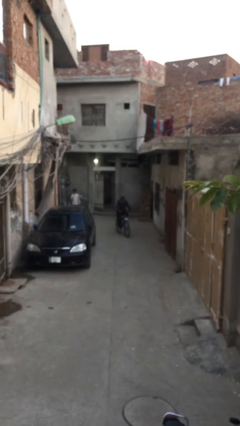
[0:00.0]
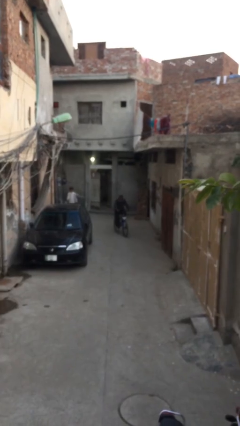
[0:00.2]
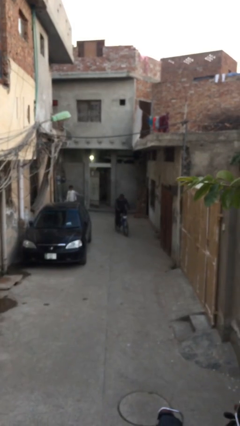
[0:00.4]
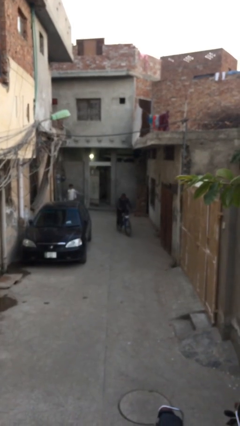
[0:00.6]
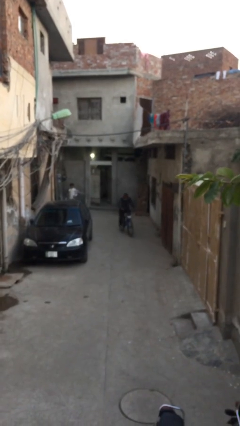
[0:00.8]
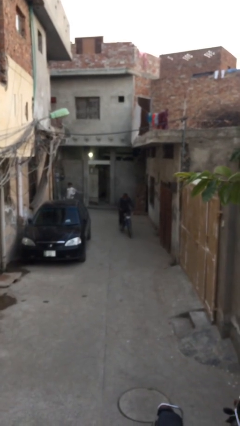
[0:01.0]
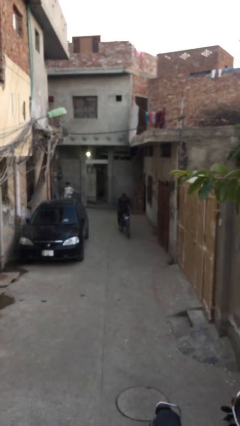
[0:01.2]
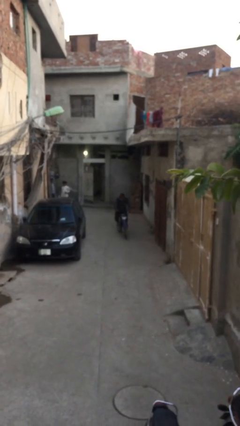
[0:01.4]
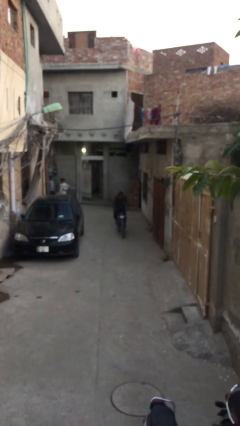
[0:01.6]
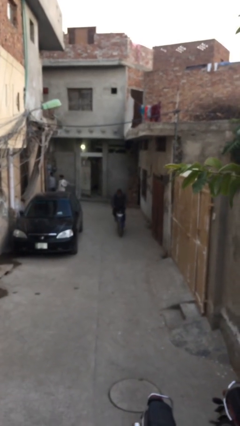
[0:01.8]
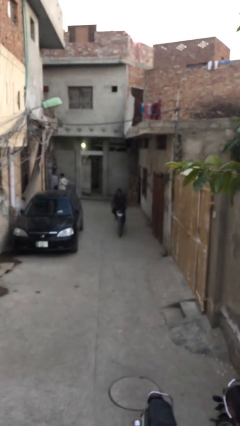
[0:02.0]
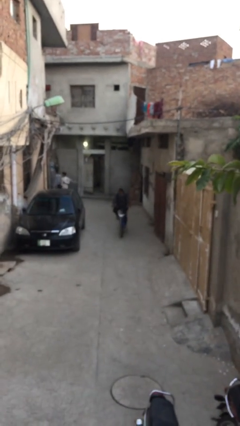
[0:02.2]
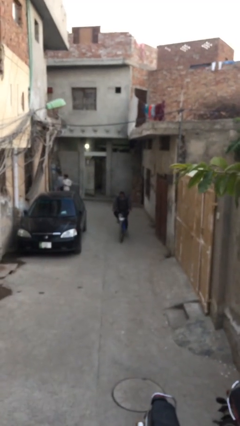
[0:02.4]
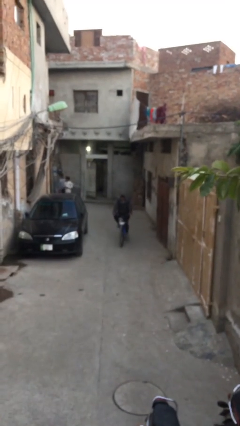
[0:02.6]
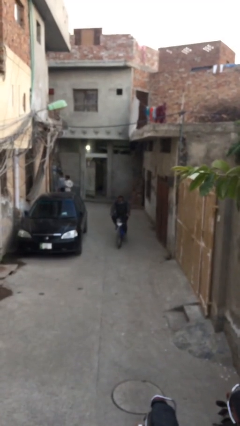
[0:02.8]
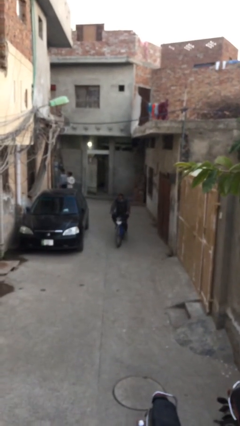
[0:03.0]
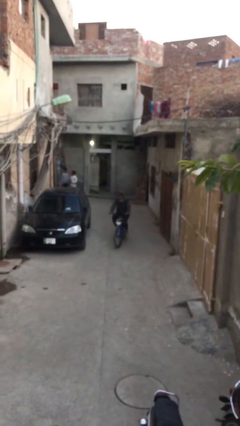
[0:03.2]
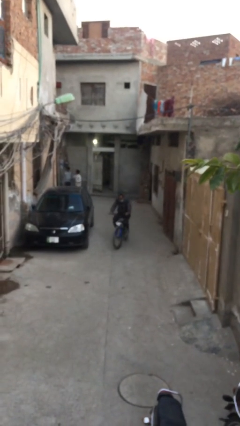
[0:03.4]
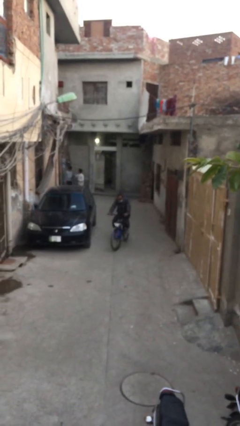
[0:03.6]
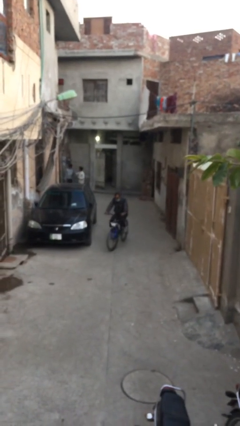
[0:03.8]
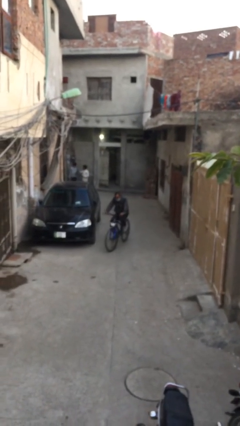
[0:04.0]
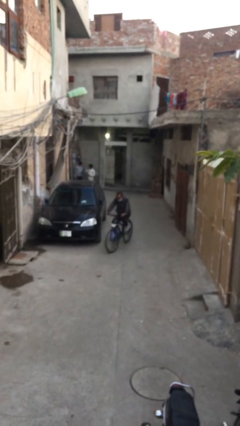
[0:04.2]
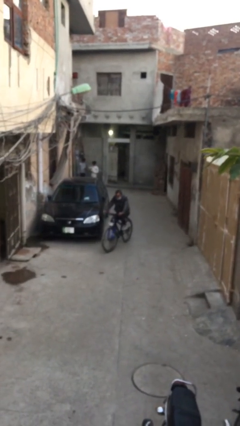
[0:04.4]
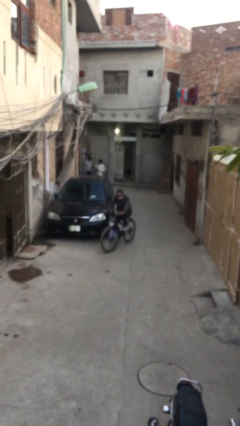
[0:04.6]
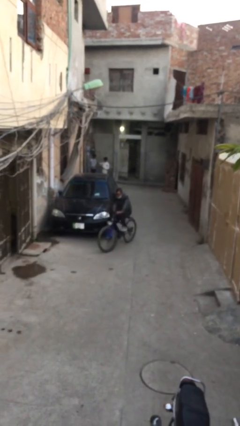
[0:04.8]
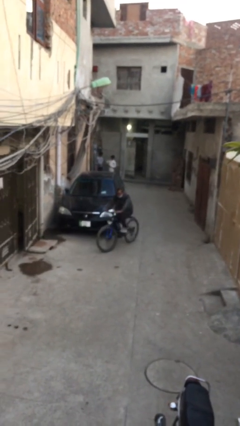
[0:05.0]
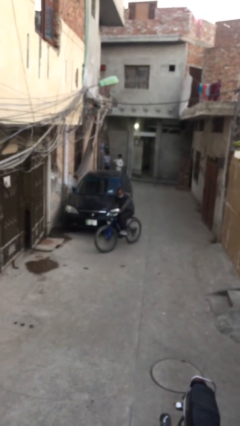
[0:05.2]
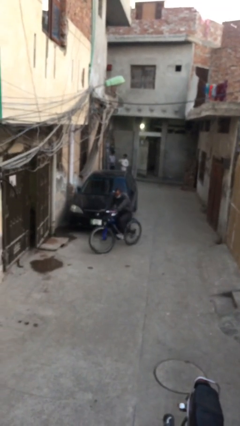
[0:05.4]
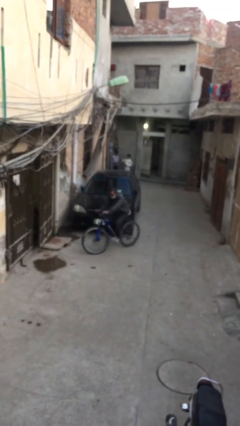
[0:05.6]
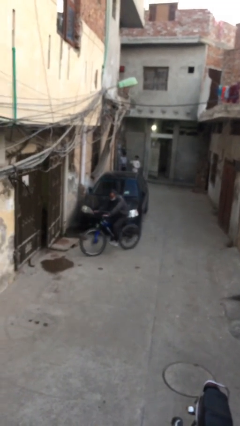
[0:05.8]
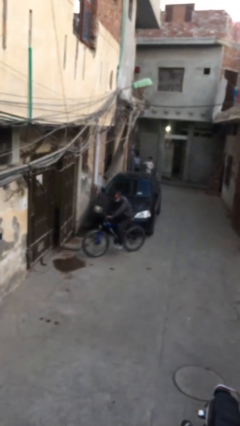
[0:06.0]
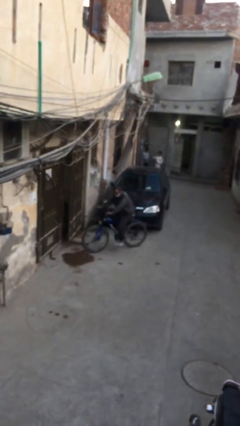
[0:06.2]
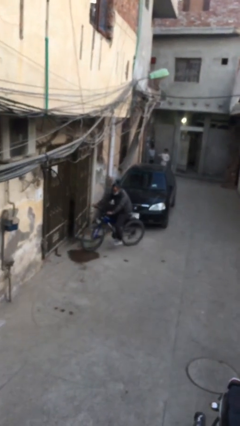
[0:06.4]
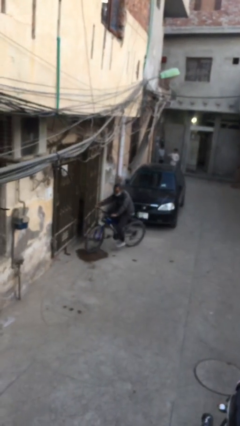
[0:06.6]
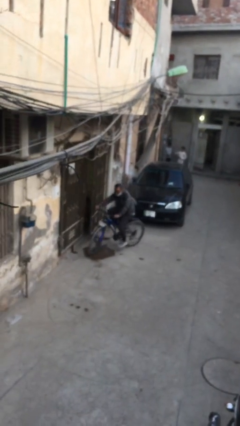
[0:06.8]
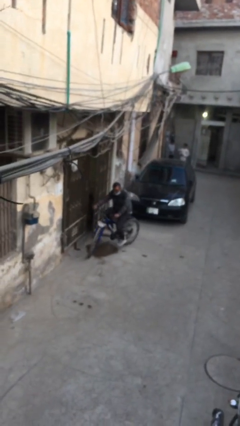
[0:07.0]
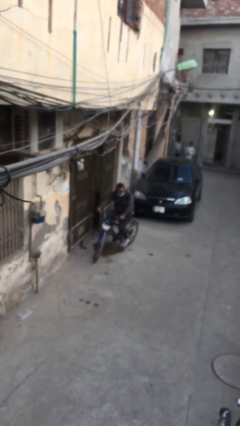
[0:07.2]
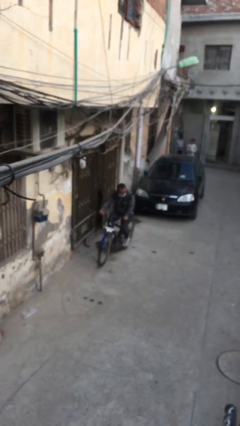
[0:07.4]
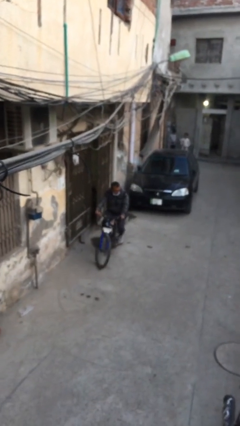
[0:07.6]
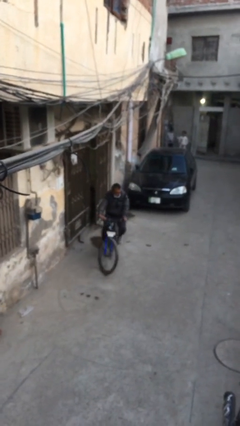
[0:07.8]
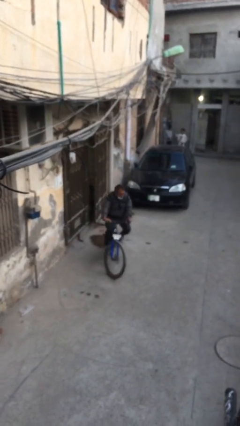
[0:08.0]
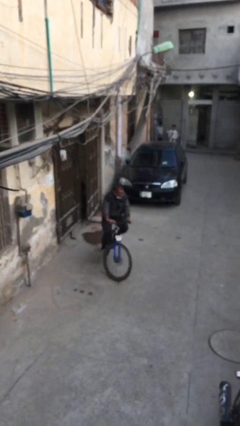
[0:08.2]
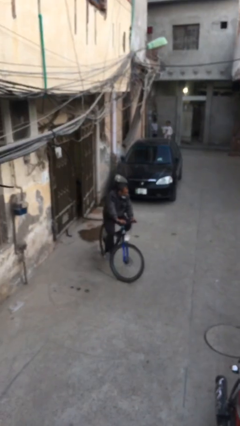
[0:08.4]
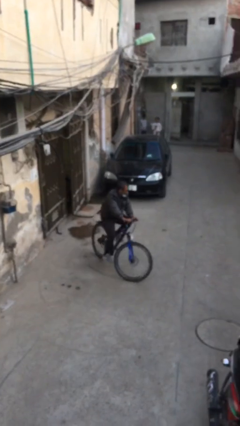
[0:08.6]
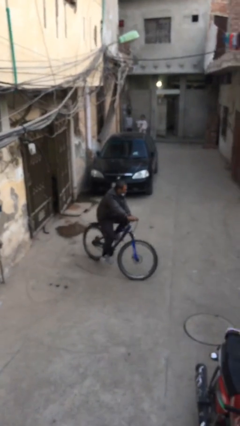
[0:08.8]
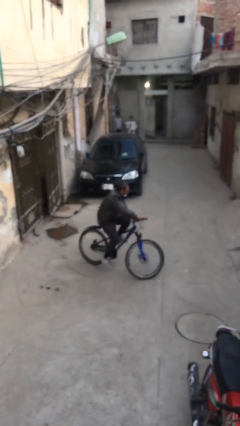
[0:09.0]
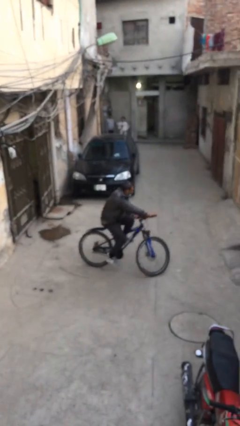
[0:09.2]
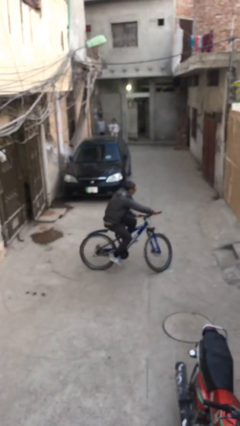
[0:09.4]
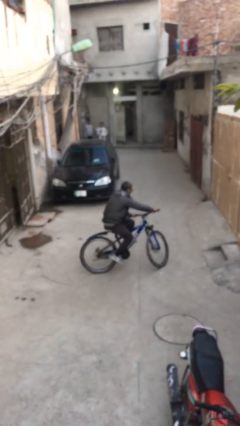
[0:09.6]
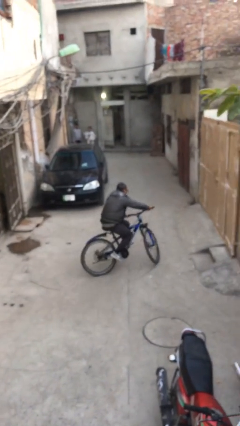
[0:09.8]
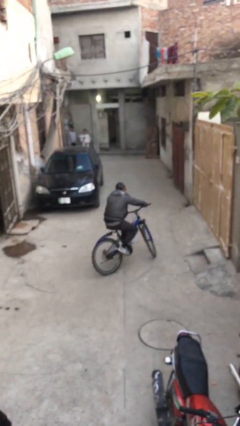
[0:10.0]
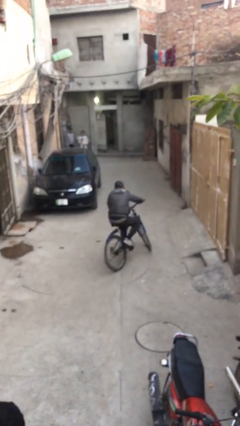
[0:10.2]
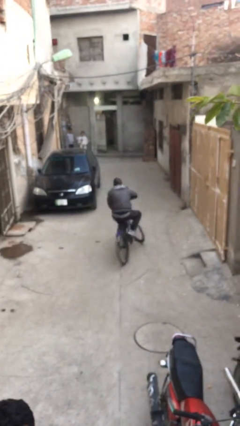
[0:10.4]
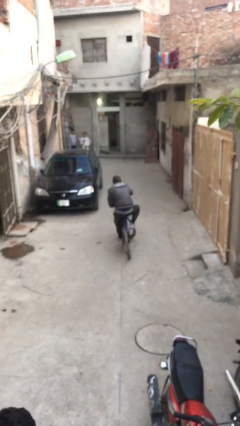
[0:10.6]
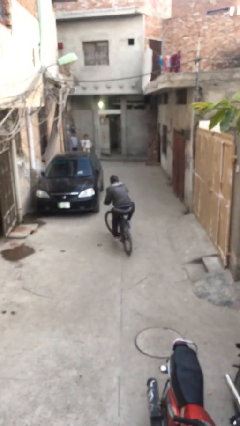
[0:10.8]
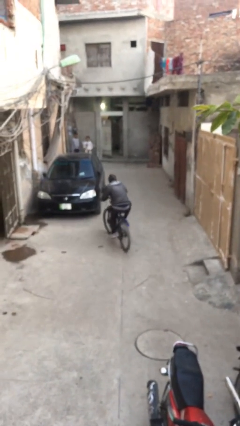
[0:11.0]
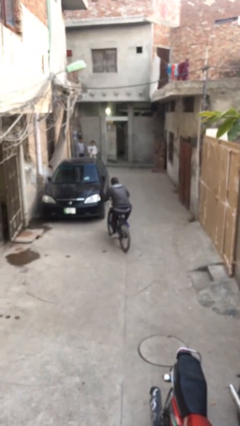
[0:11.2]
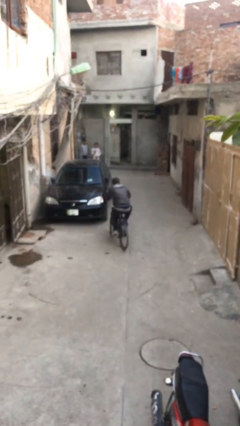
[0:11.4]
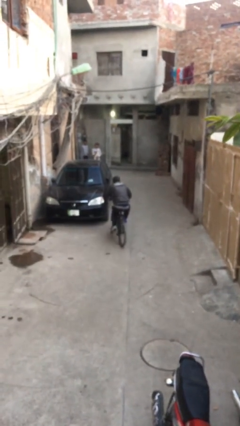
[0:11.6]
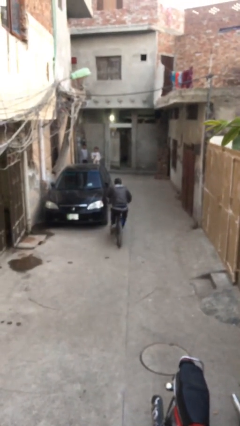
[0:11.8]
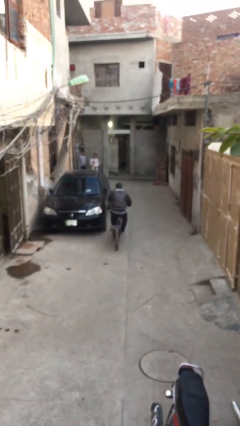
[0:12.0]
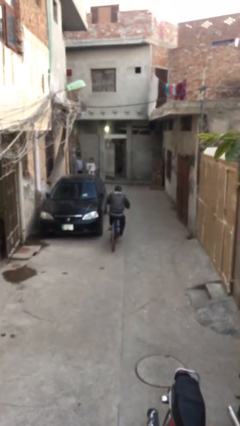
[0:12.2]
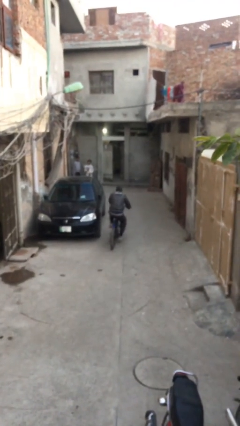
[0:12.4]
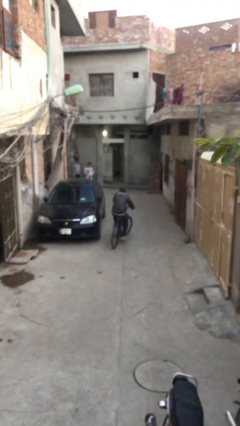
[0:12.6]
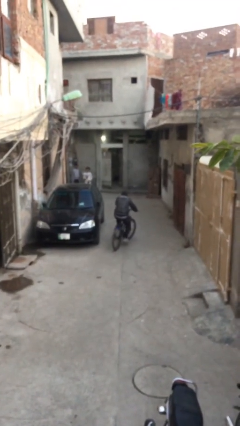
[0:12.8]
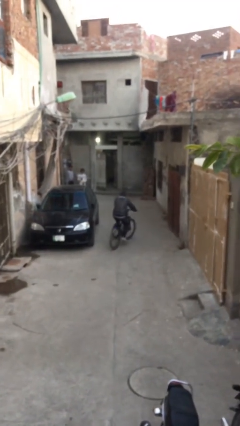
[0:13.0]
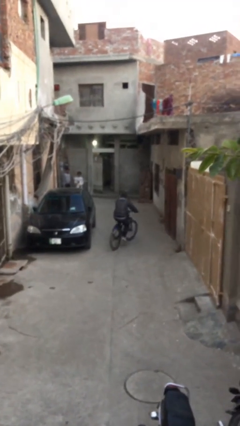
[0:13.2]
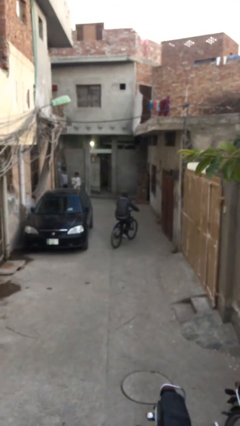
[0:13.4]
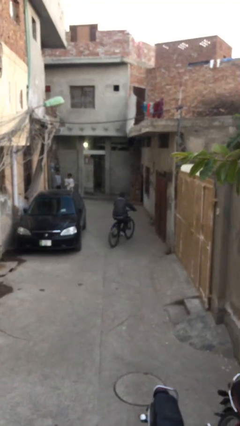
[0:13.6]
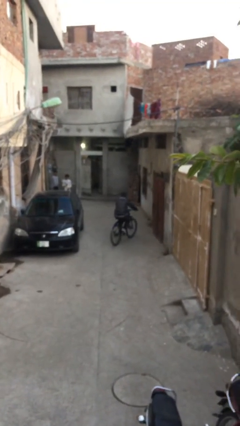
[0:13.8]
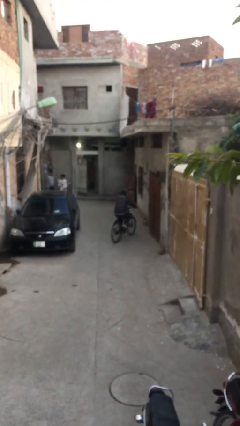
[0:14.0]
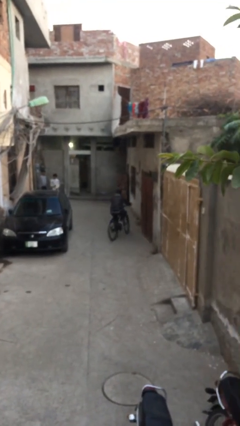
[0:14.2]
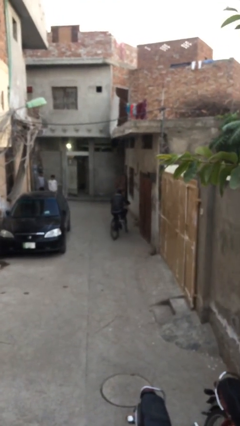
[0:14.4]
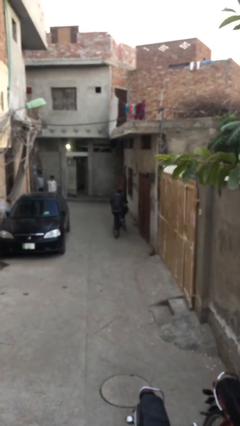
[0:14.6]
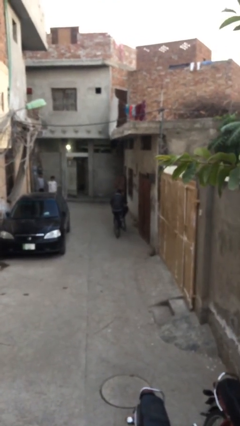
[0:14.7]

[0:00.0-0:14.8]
person rides bicycle

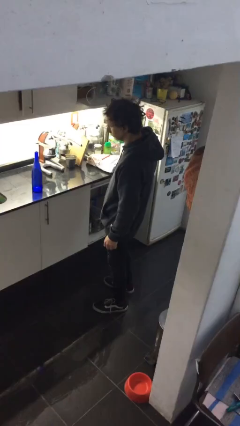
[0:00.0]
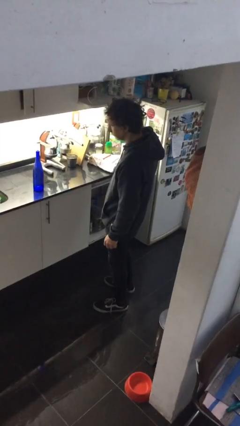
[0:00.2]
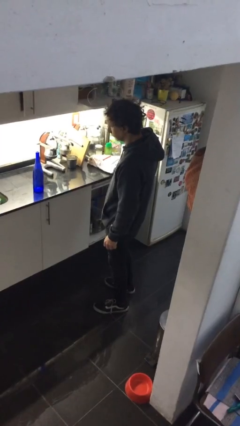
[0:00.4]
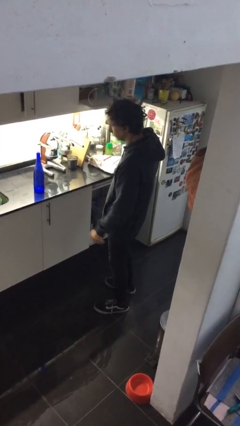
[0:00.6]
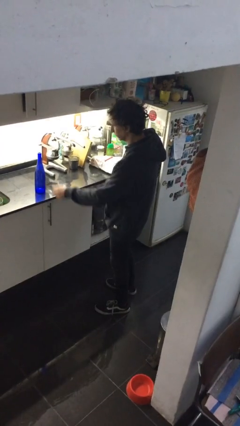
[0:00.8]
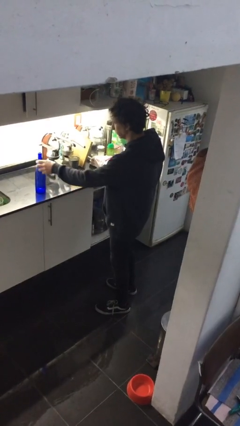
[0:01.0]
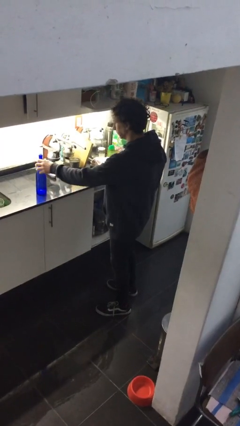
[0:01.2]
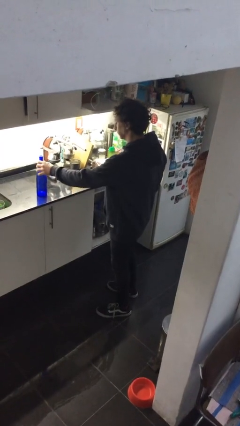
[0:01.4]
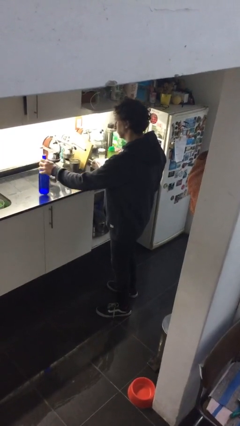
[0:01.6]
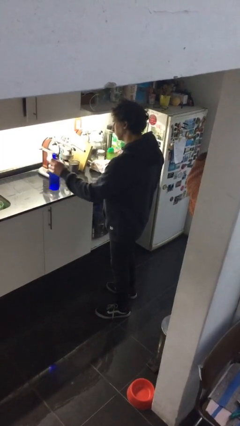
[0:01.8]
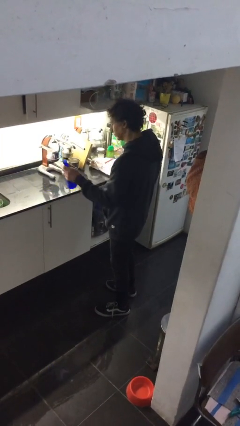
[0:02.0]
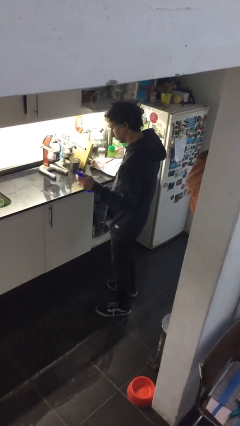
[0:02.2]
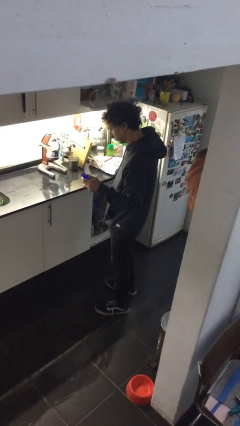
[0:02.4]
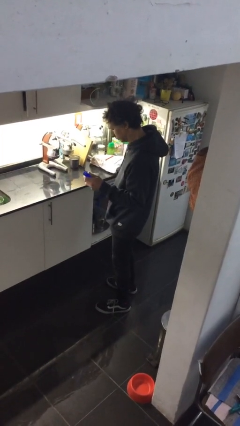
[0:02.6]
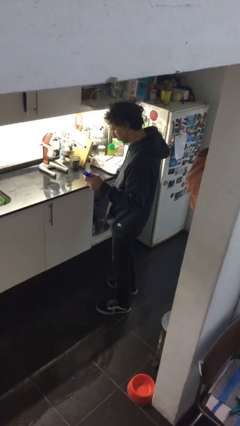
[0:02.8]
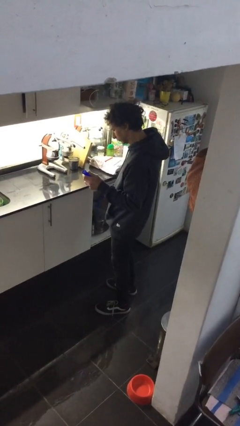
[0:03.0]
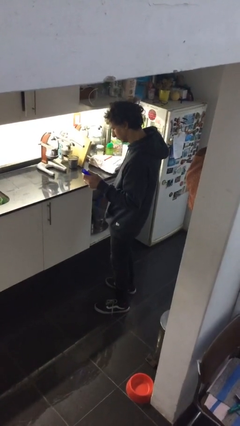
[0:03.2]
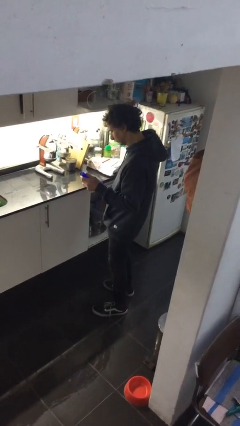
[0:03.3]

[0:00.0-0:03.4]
person picks up object from countertop

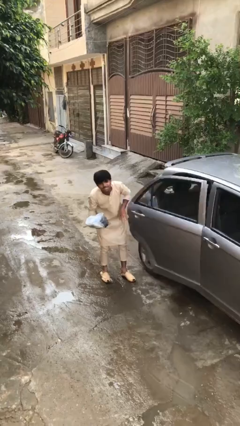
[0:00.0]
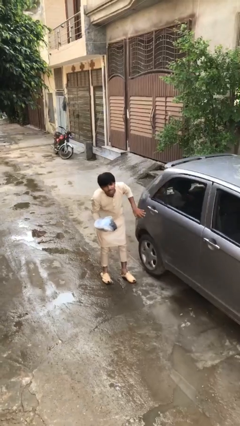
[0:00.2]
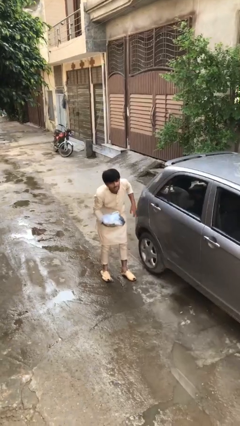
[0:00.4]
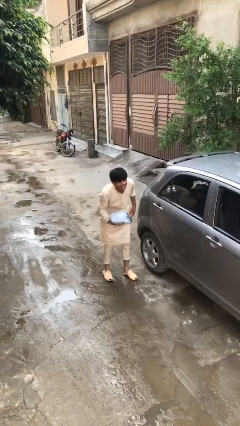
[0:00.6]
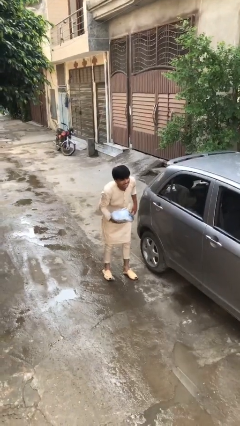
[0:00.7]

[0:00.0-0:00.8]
person closes car door
